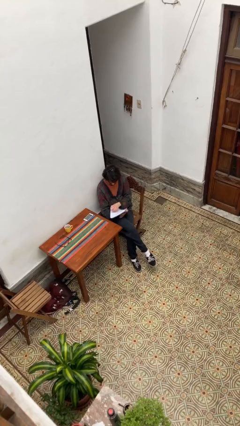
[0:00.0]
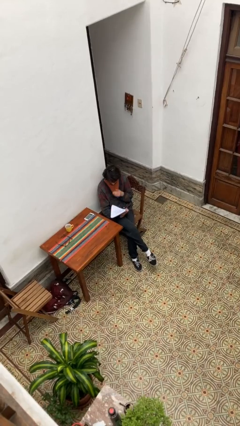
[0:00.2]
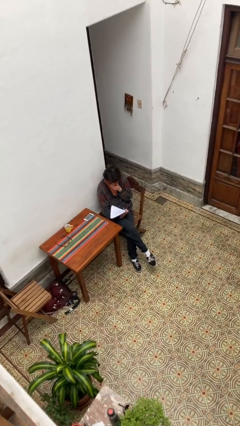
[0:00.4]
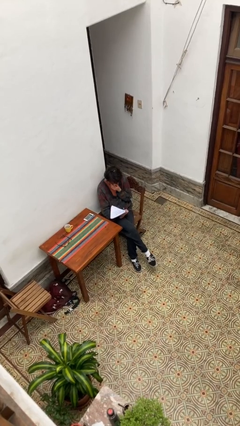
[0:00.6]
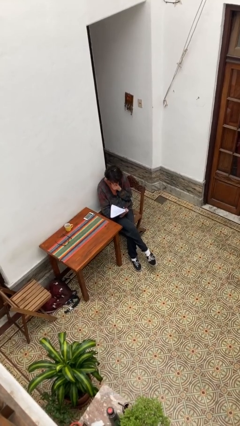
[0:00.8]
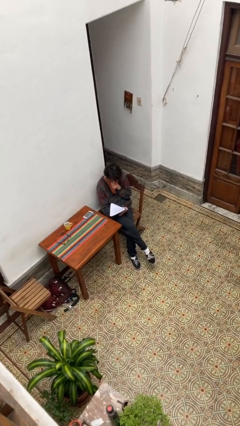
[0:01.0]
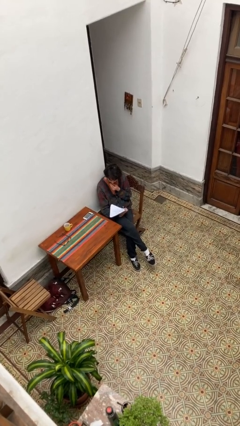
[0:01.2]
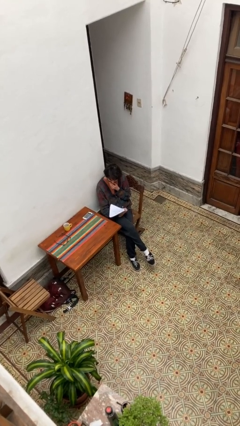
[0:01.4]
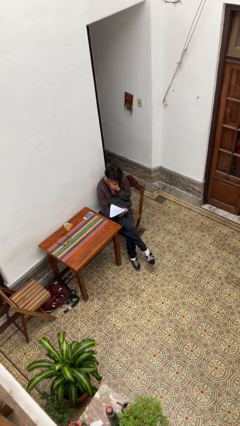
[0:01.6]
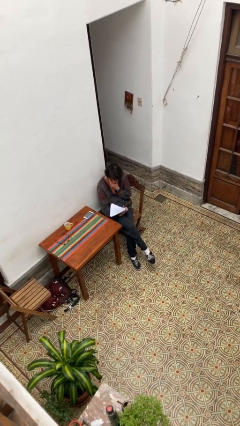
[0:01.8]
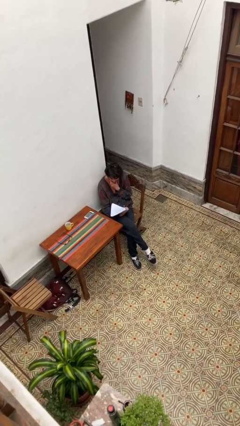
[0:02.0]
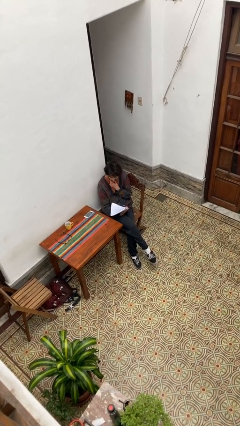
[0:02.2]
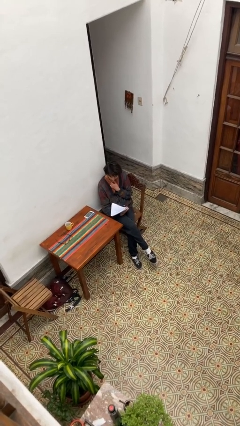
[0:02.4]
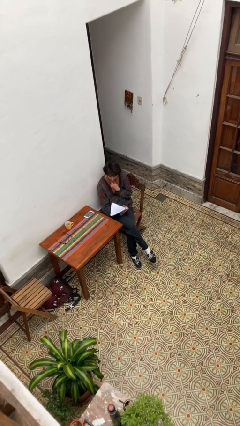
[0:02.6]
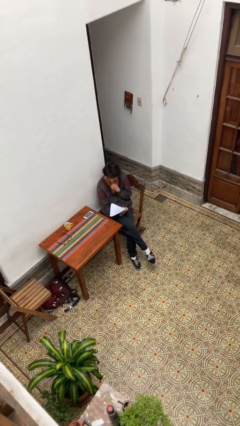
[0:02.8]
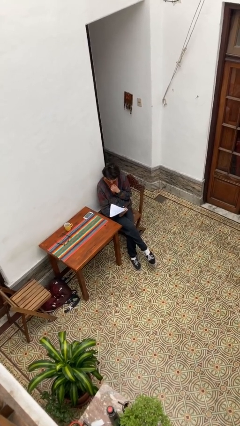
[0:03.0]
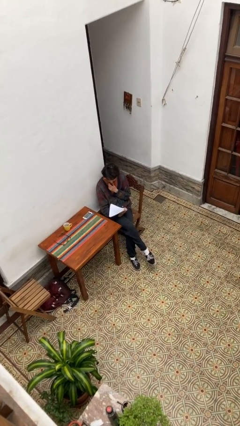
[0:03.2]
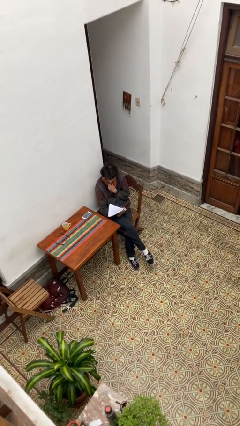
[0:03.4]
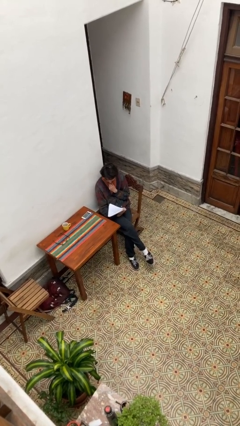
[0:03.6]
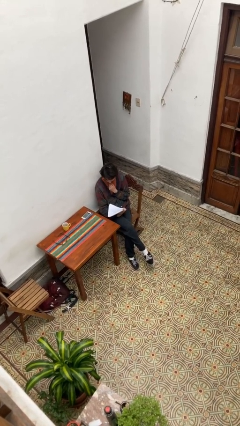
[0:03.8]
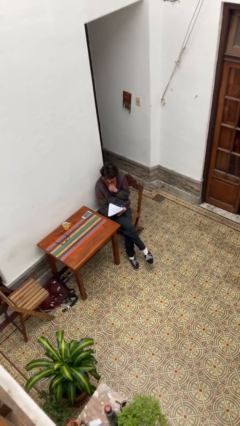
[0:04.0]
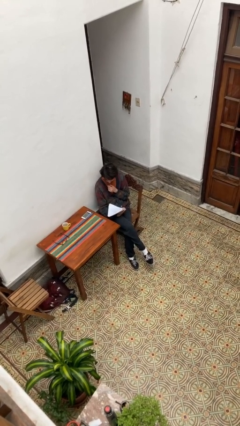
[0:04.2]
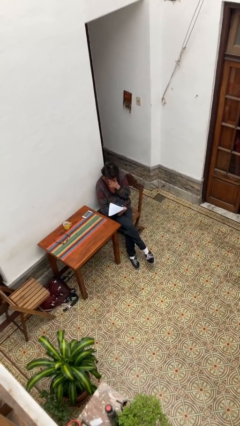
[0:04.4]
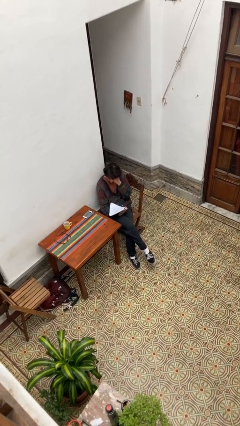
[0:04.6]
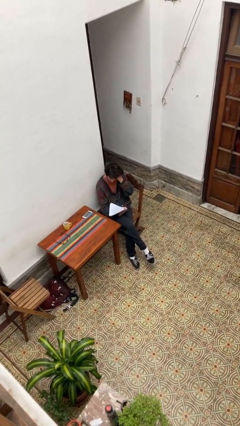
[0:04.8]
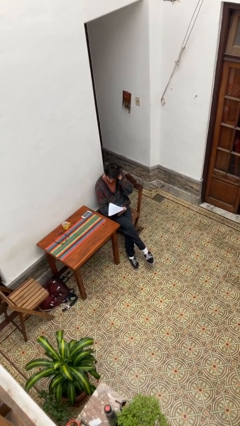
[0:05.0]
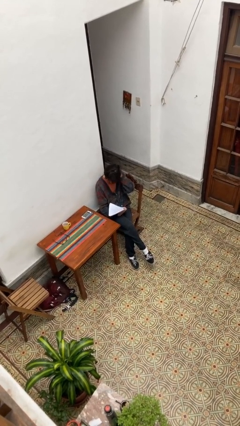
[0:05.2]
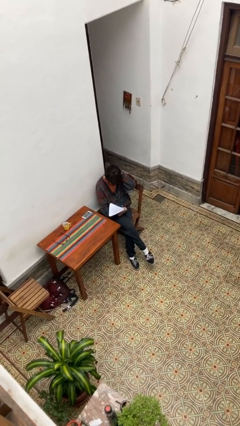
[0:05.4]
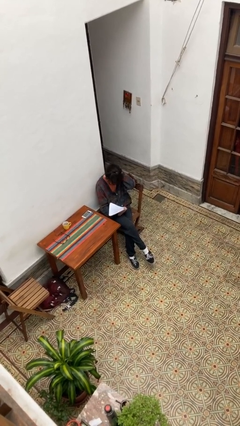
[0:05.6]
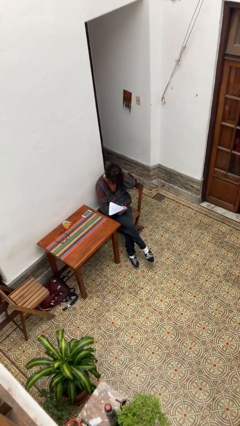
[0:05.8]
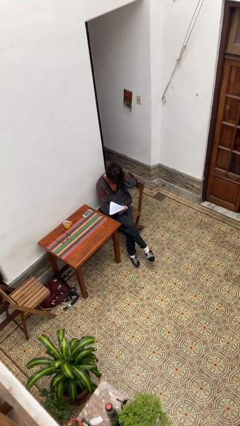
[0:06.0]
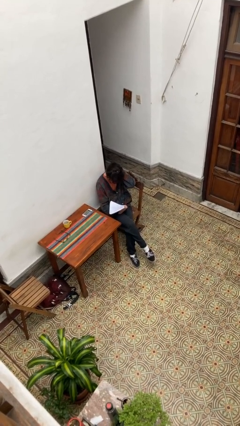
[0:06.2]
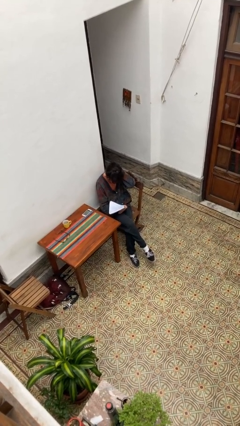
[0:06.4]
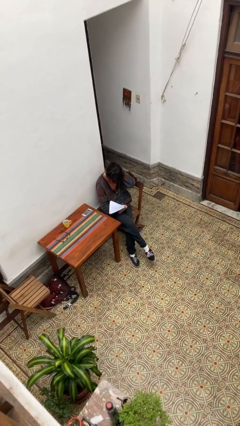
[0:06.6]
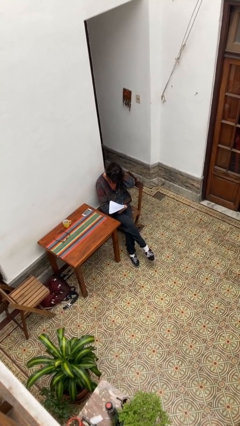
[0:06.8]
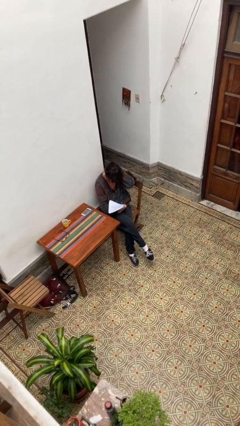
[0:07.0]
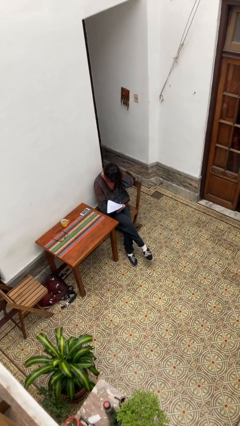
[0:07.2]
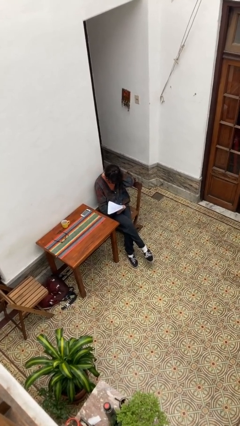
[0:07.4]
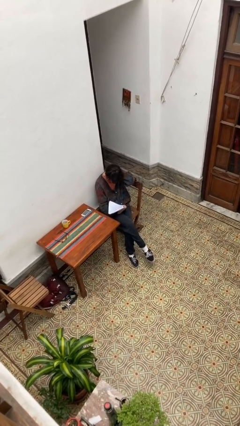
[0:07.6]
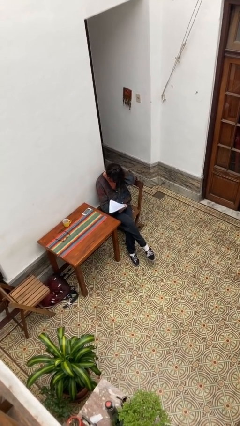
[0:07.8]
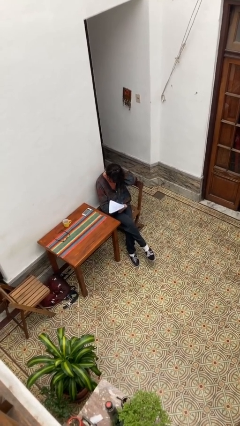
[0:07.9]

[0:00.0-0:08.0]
person reads document

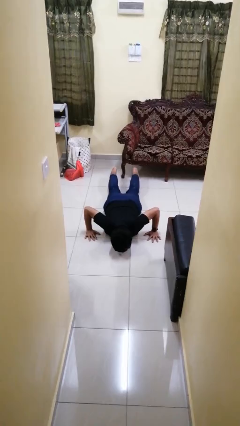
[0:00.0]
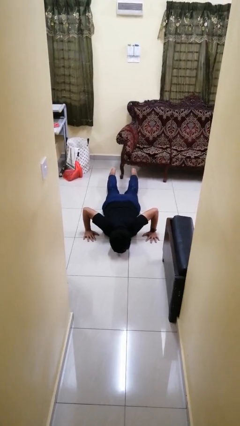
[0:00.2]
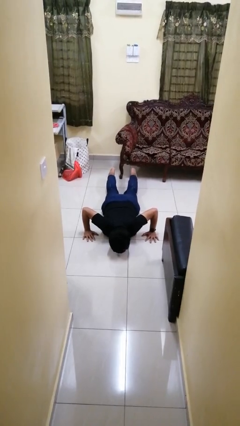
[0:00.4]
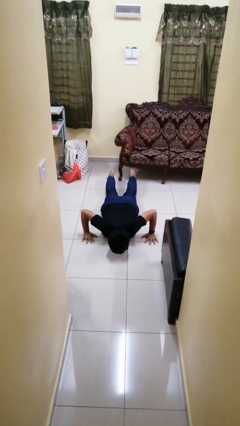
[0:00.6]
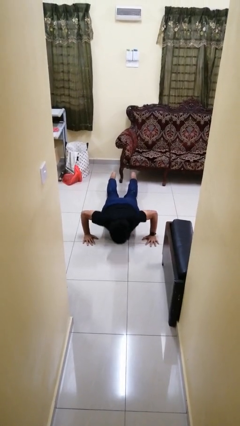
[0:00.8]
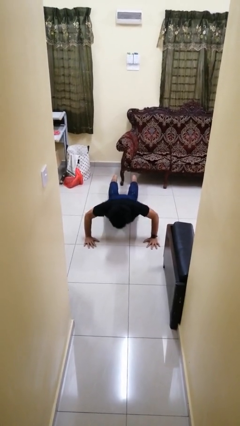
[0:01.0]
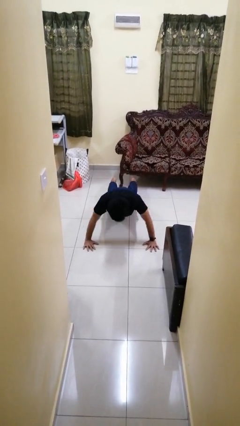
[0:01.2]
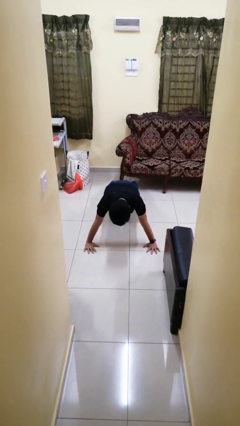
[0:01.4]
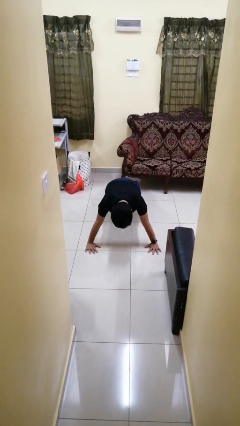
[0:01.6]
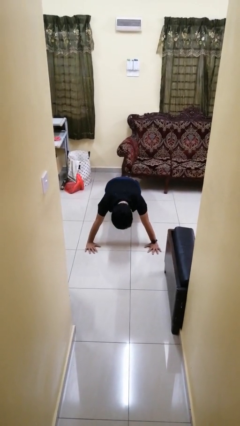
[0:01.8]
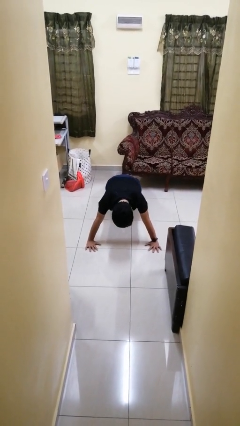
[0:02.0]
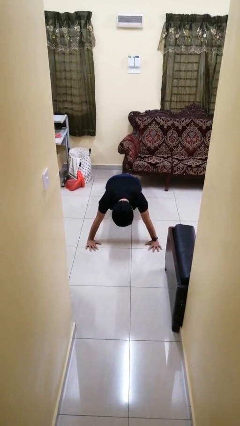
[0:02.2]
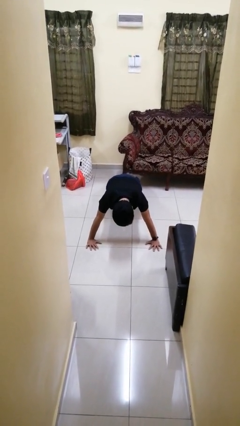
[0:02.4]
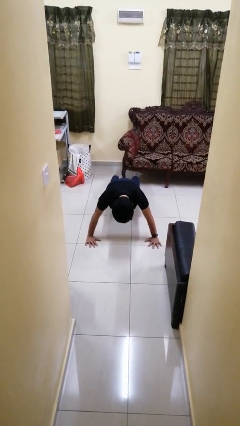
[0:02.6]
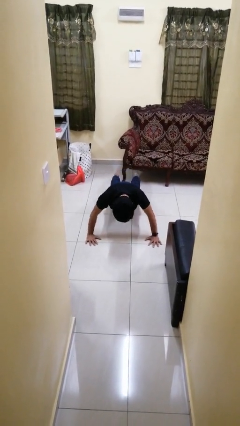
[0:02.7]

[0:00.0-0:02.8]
person exercises with pushup

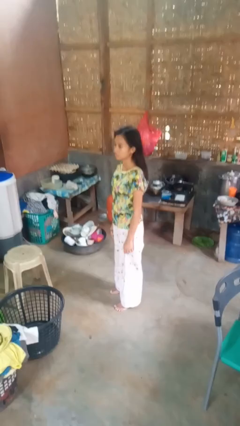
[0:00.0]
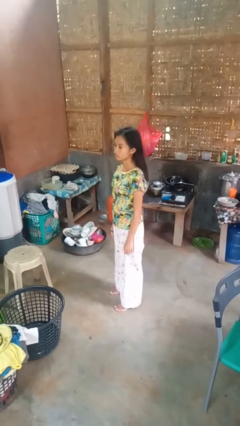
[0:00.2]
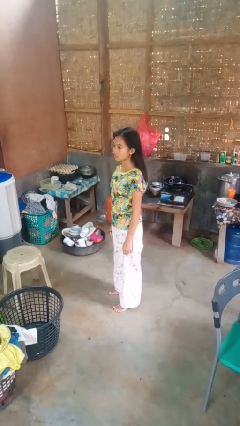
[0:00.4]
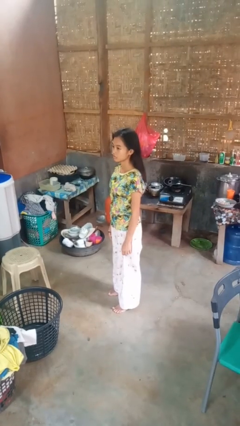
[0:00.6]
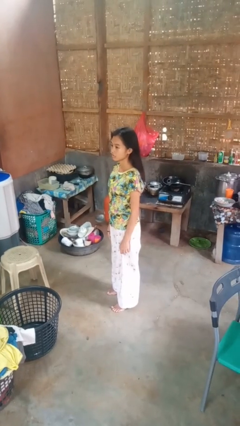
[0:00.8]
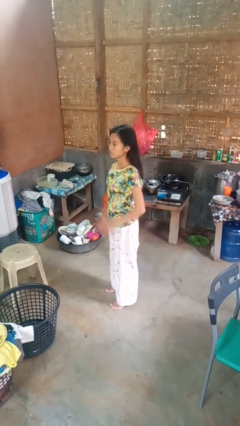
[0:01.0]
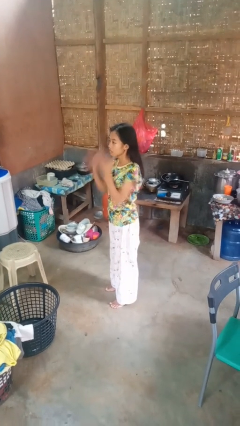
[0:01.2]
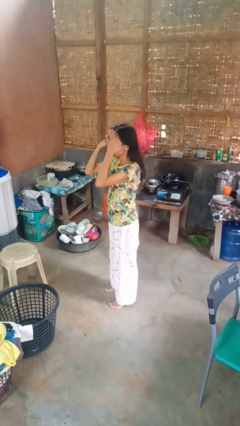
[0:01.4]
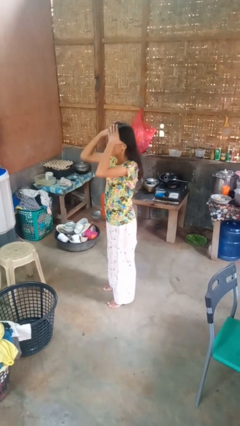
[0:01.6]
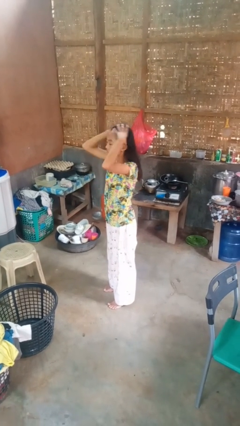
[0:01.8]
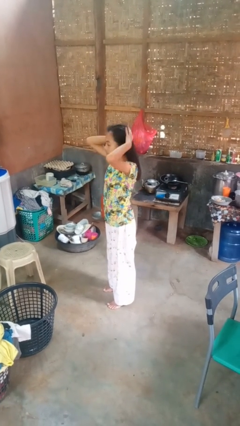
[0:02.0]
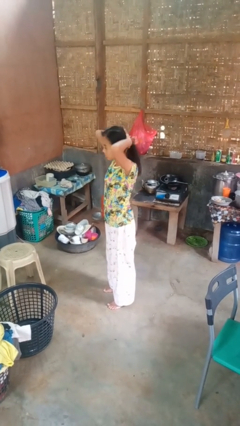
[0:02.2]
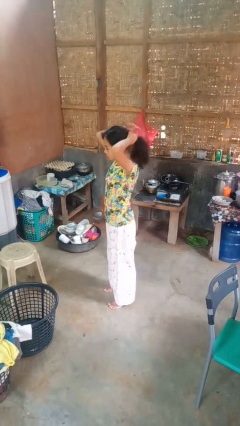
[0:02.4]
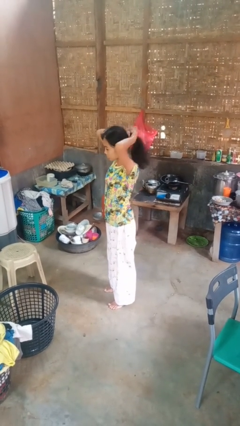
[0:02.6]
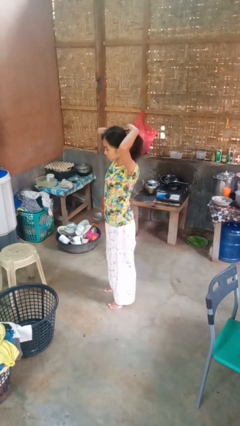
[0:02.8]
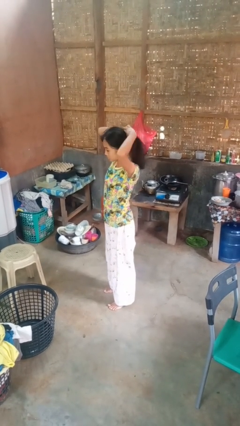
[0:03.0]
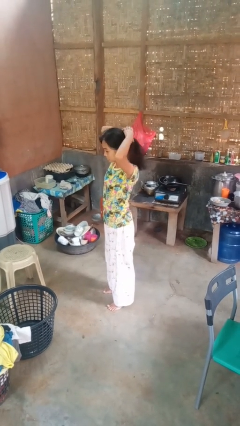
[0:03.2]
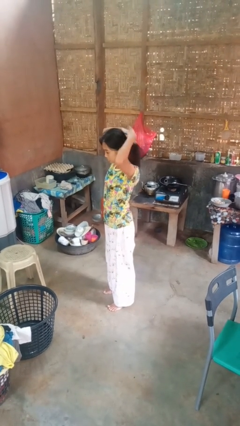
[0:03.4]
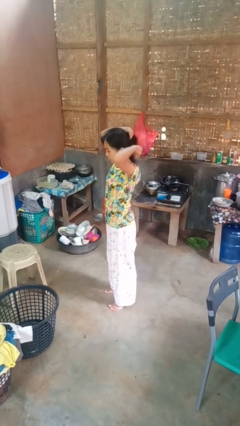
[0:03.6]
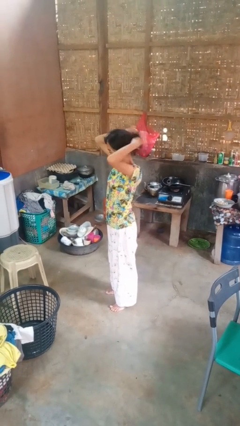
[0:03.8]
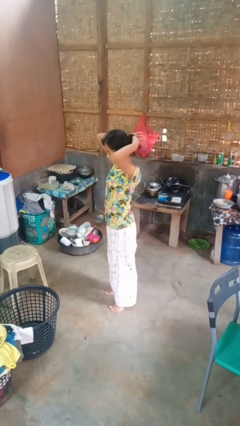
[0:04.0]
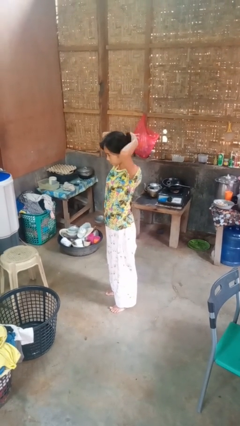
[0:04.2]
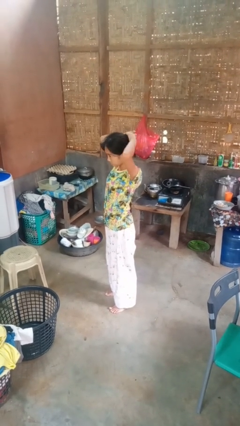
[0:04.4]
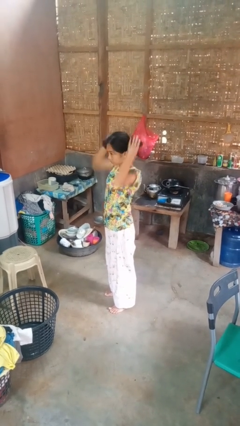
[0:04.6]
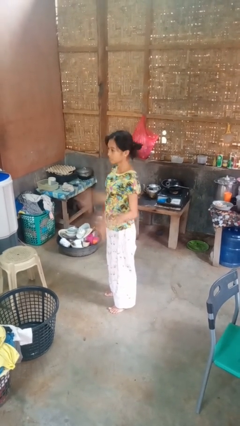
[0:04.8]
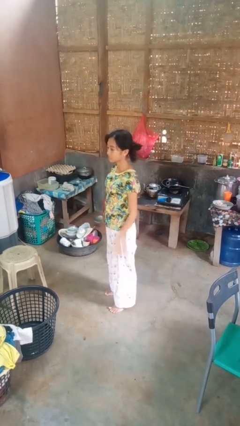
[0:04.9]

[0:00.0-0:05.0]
person puts hair in ponytail

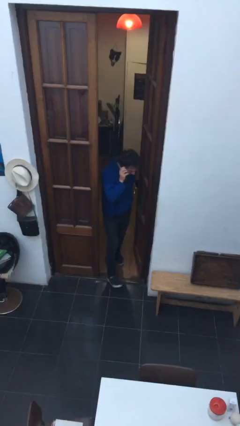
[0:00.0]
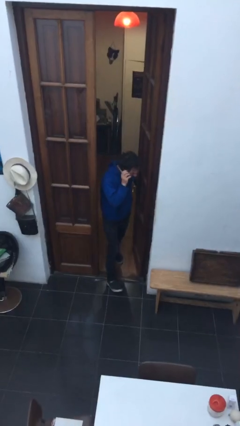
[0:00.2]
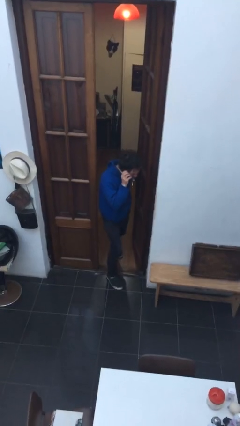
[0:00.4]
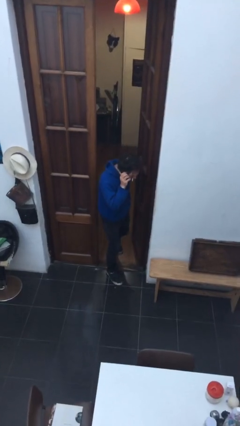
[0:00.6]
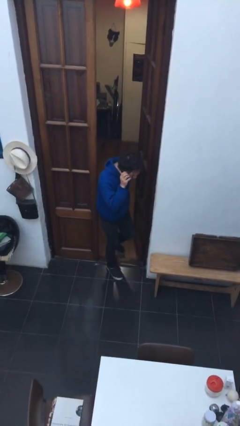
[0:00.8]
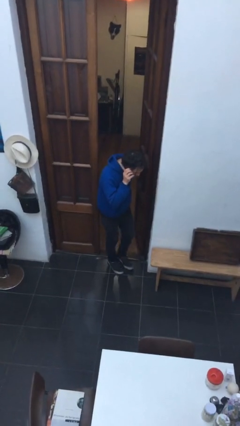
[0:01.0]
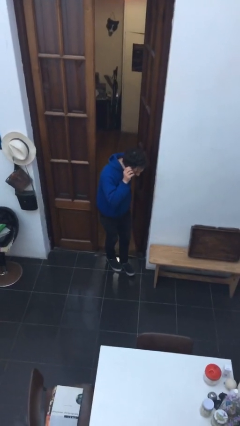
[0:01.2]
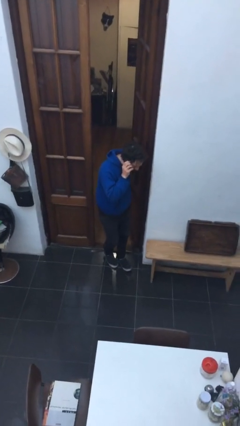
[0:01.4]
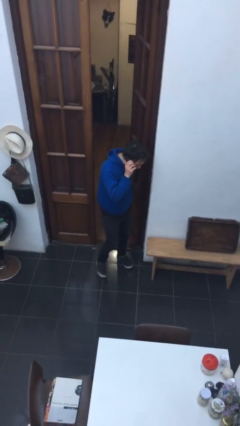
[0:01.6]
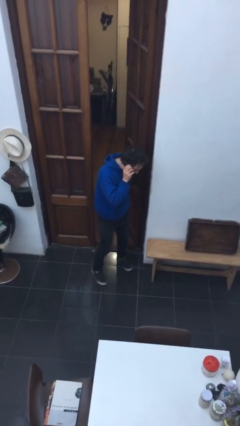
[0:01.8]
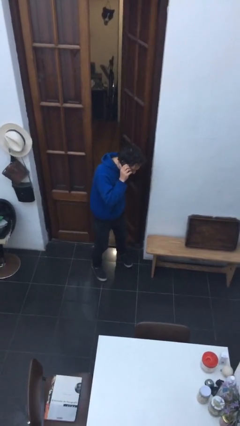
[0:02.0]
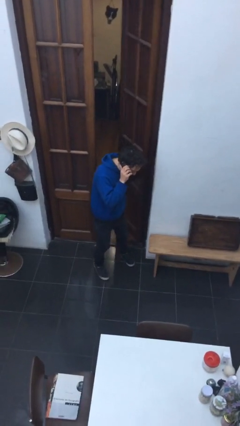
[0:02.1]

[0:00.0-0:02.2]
person enters scene through structure
